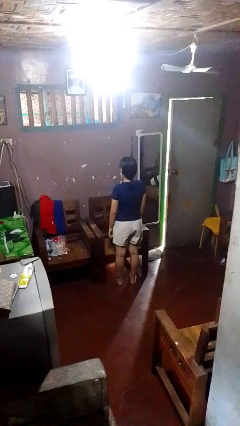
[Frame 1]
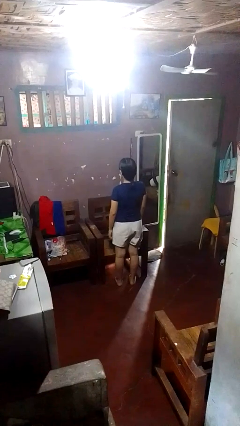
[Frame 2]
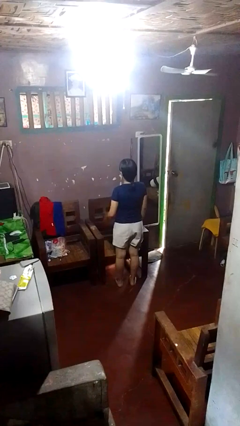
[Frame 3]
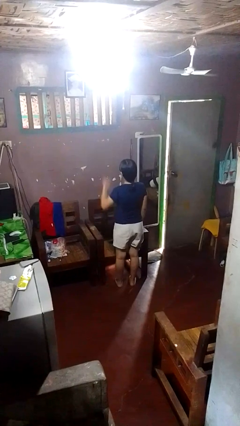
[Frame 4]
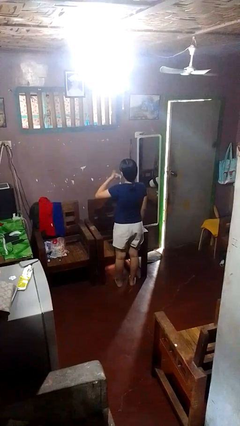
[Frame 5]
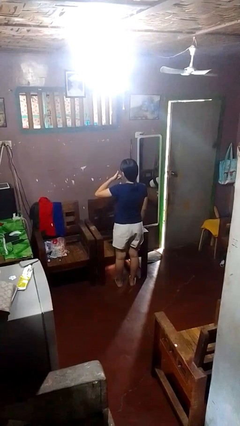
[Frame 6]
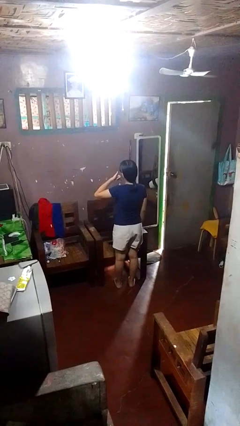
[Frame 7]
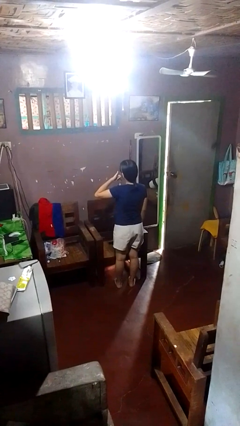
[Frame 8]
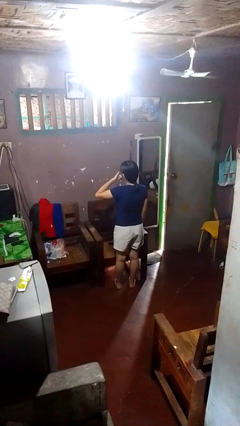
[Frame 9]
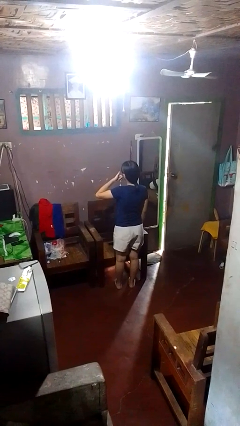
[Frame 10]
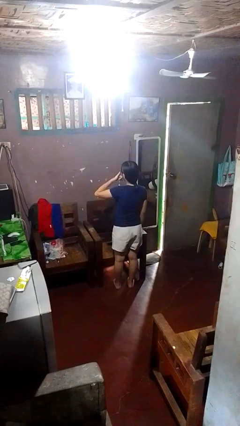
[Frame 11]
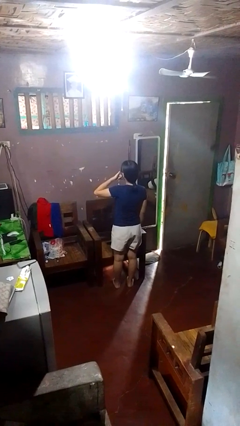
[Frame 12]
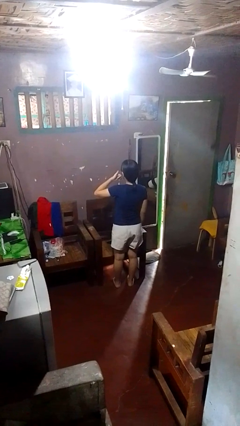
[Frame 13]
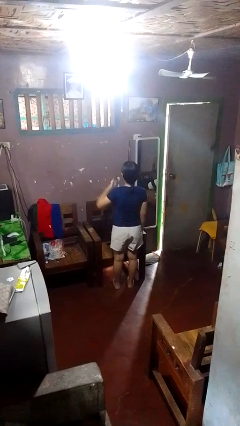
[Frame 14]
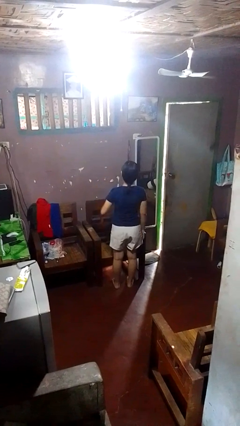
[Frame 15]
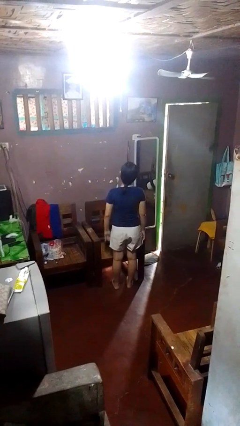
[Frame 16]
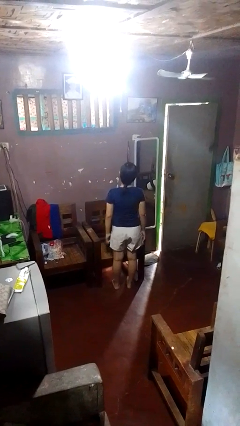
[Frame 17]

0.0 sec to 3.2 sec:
person gestures call me

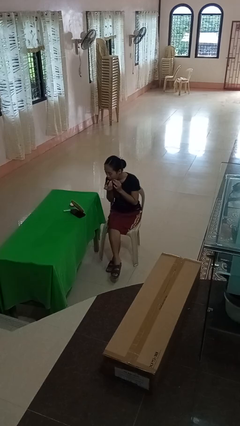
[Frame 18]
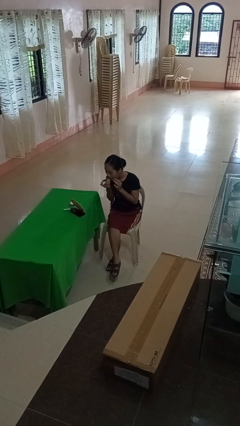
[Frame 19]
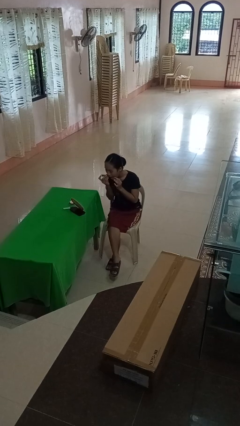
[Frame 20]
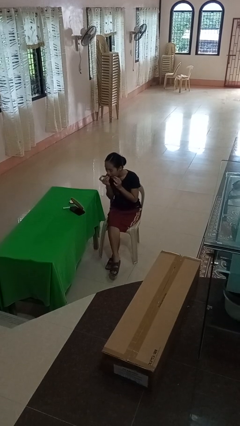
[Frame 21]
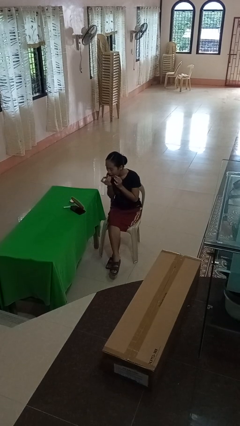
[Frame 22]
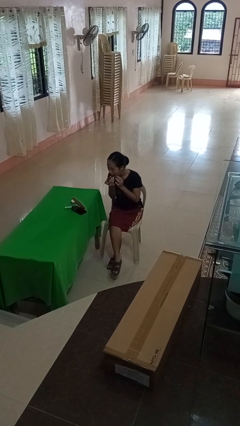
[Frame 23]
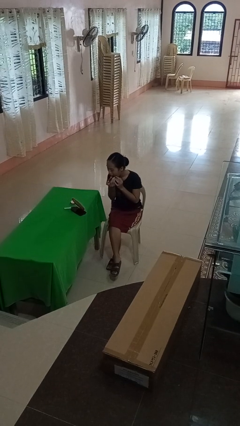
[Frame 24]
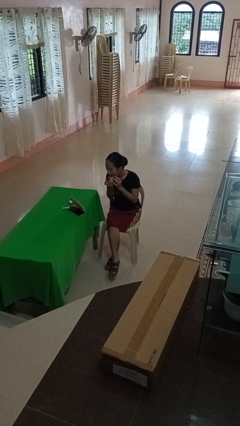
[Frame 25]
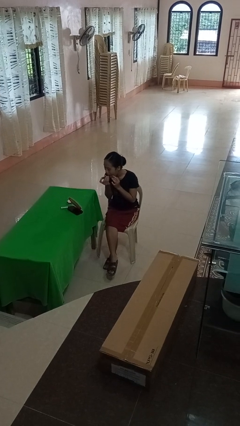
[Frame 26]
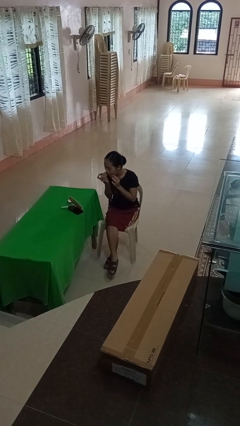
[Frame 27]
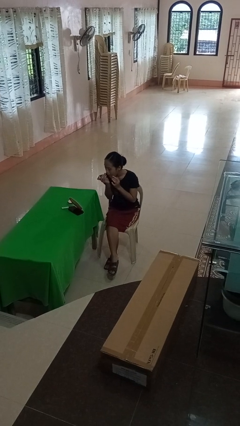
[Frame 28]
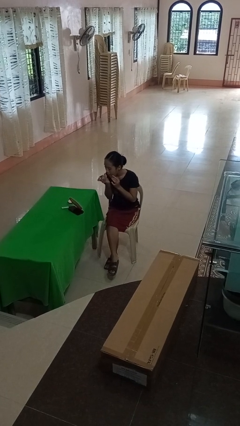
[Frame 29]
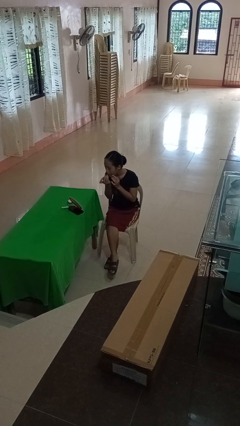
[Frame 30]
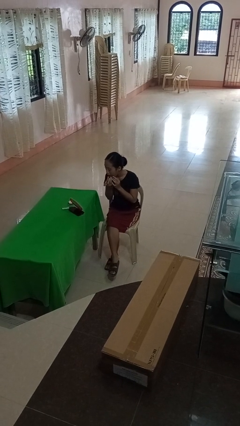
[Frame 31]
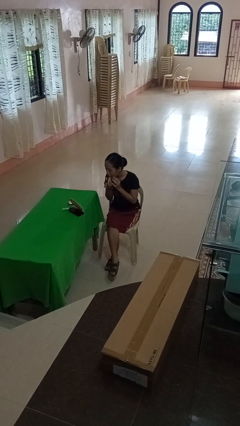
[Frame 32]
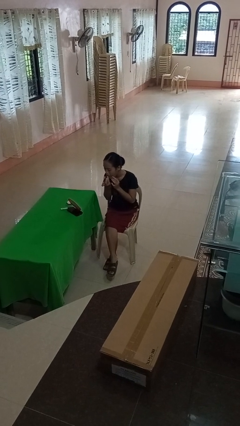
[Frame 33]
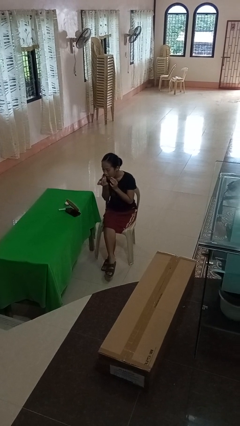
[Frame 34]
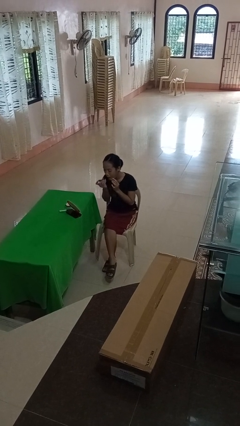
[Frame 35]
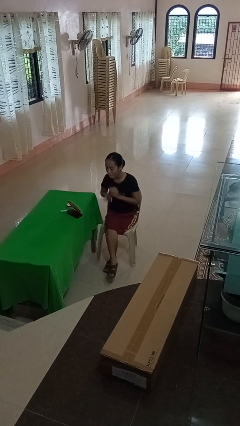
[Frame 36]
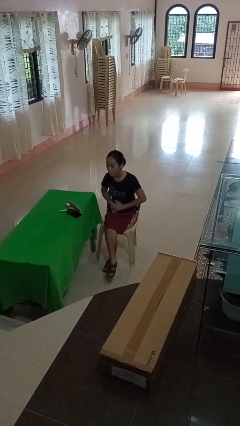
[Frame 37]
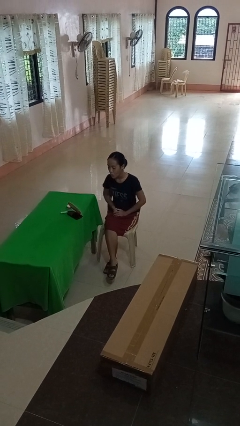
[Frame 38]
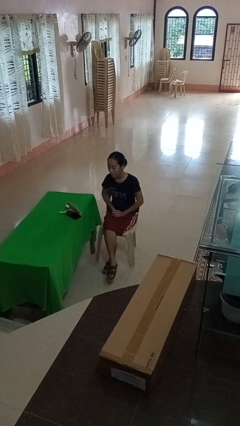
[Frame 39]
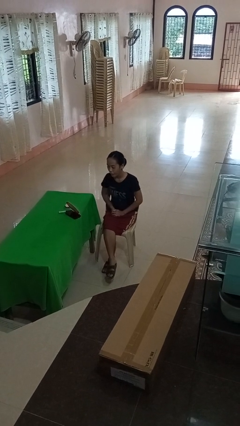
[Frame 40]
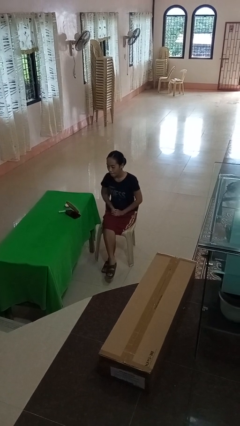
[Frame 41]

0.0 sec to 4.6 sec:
person applies lip makeup

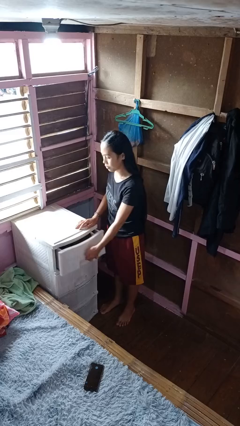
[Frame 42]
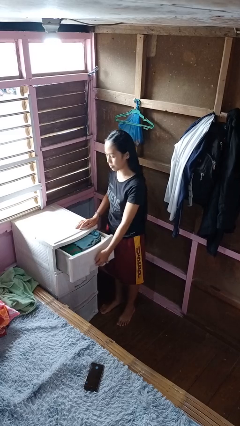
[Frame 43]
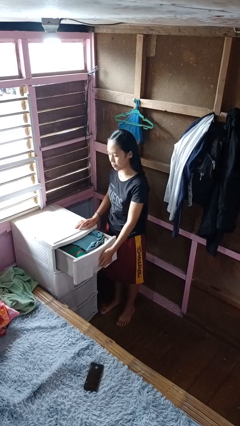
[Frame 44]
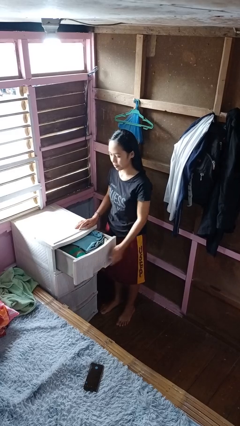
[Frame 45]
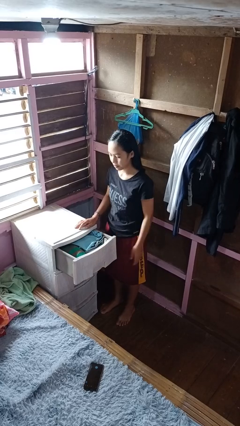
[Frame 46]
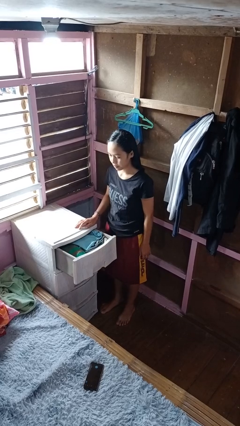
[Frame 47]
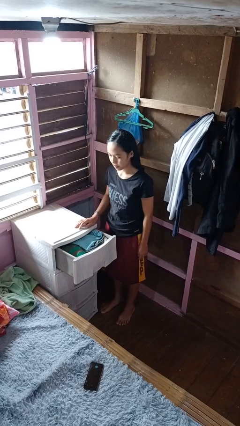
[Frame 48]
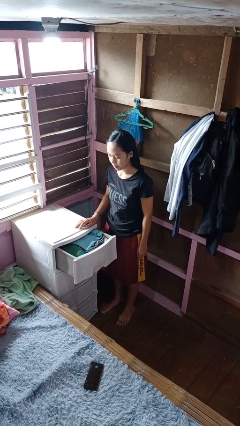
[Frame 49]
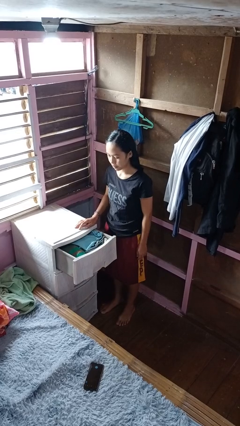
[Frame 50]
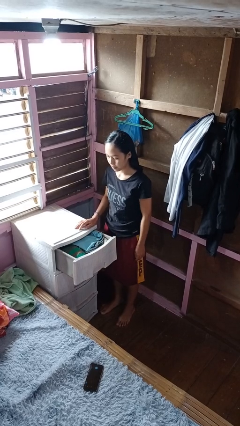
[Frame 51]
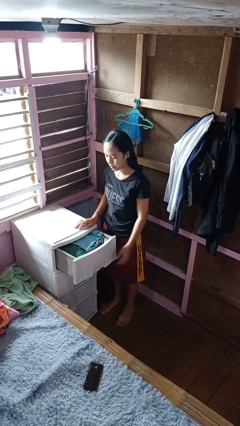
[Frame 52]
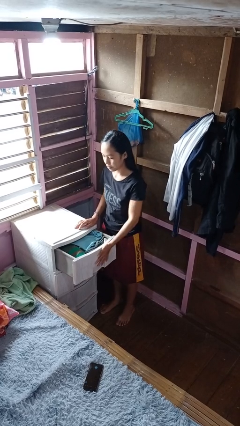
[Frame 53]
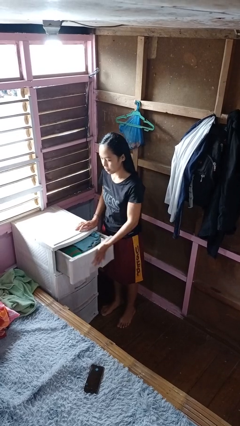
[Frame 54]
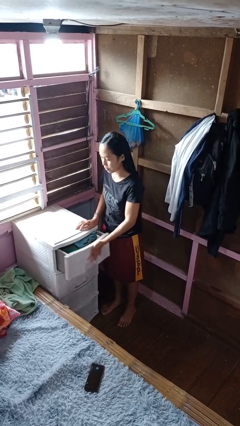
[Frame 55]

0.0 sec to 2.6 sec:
person opens dresser drawer

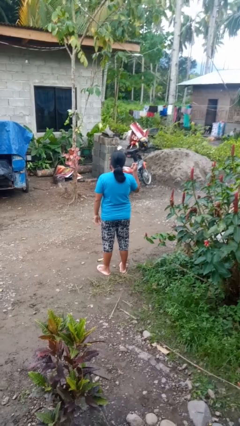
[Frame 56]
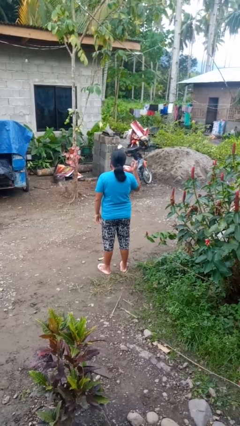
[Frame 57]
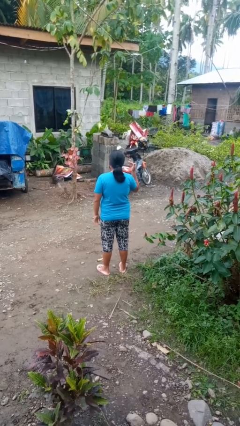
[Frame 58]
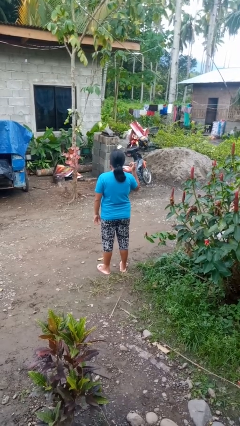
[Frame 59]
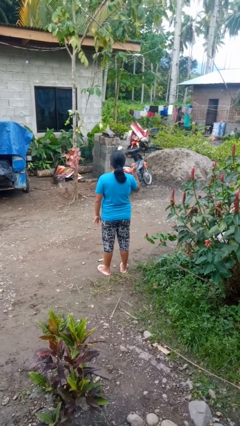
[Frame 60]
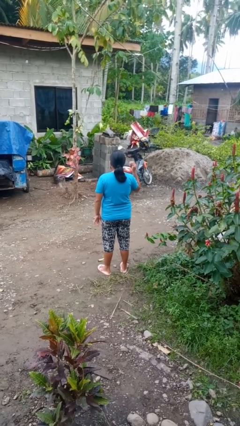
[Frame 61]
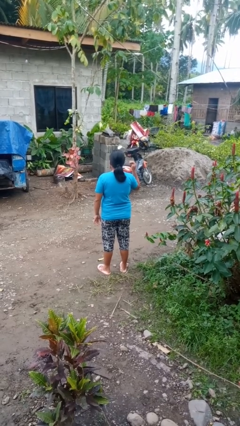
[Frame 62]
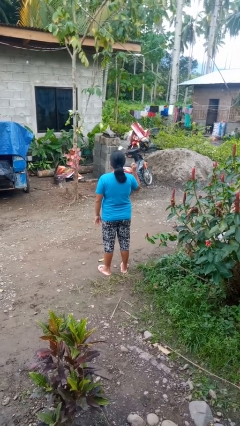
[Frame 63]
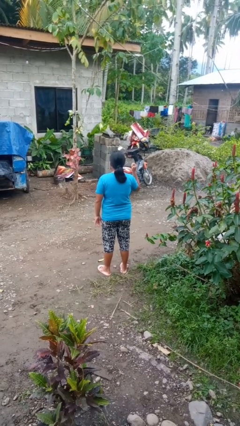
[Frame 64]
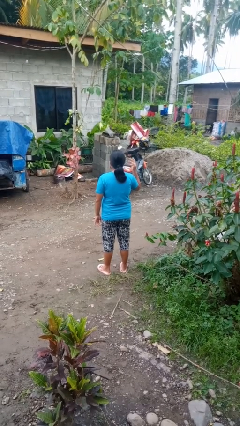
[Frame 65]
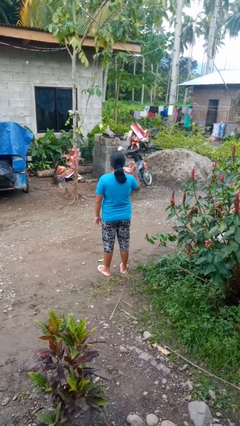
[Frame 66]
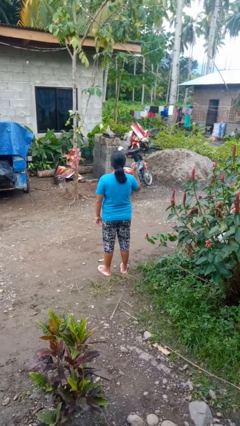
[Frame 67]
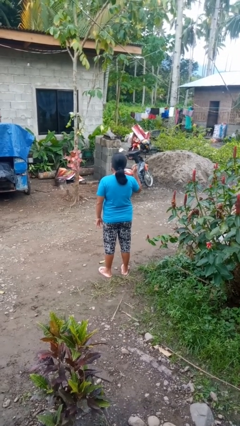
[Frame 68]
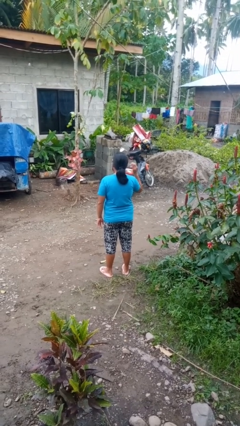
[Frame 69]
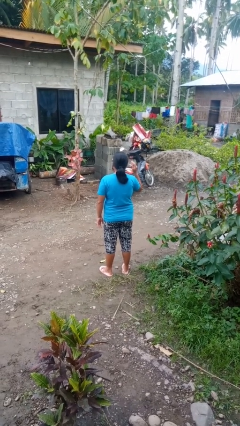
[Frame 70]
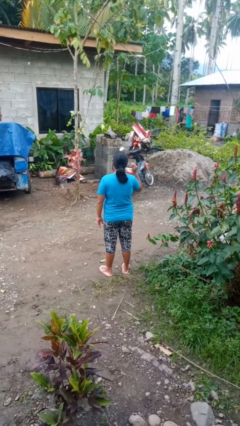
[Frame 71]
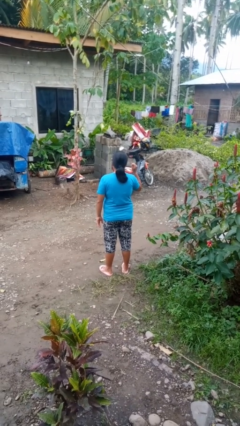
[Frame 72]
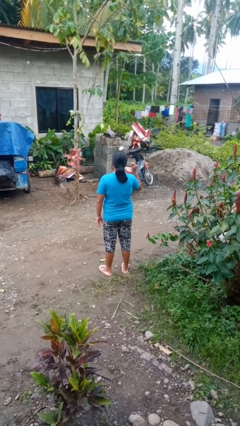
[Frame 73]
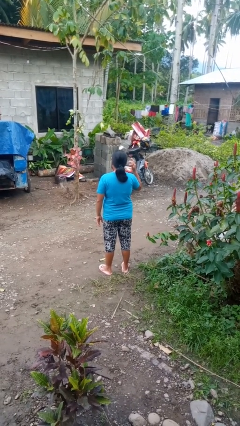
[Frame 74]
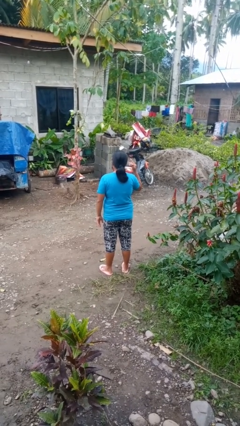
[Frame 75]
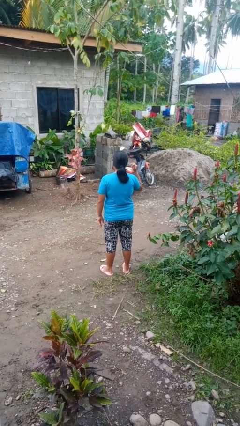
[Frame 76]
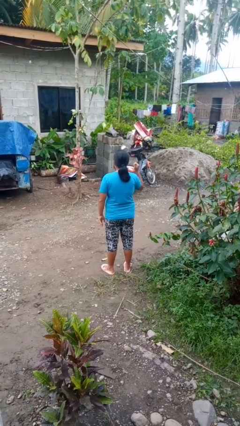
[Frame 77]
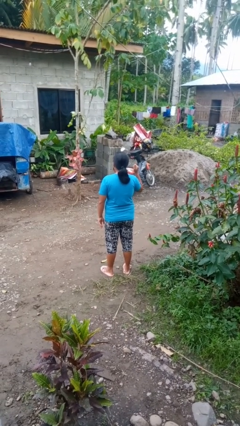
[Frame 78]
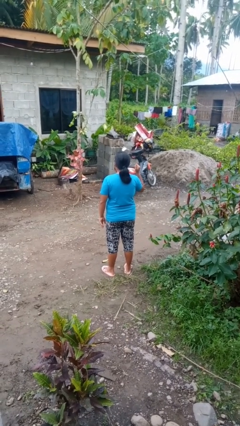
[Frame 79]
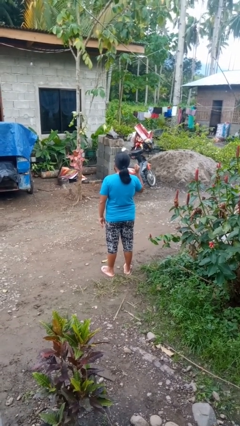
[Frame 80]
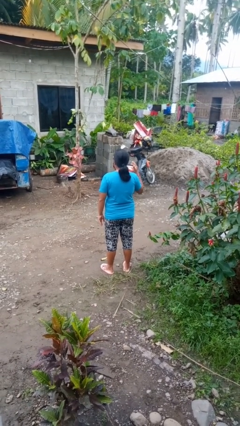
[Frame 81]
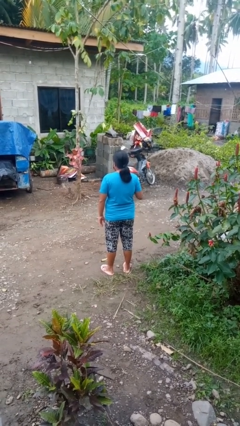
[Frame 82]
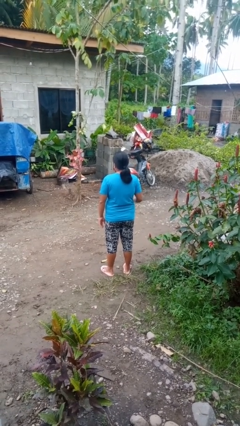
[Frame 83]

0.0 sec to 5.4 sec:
person cracks knuckles

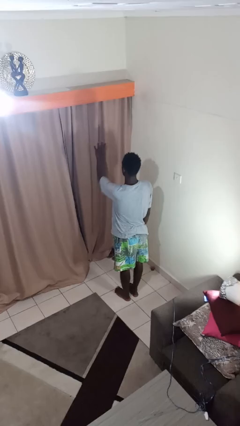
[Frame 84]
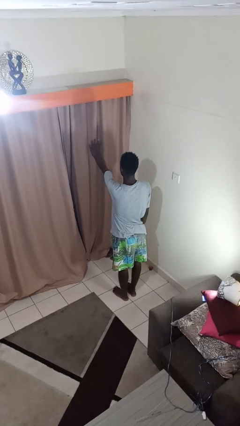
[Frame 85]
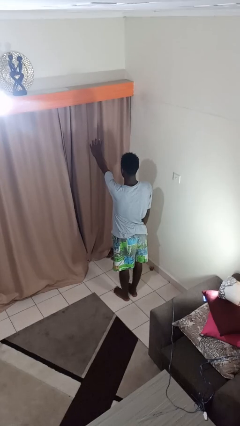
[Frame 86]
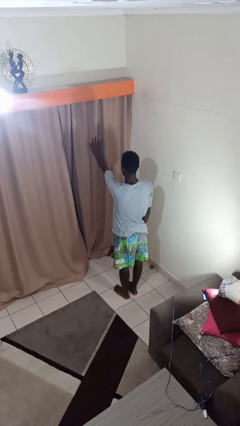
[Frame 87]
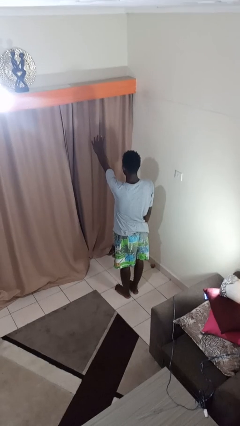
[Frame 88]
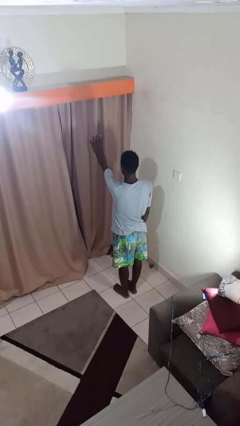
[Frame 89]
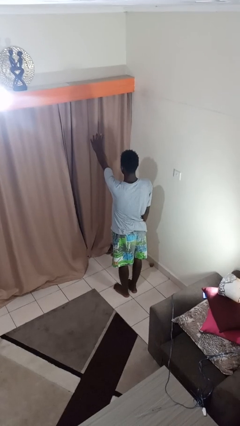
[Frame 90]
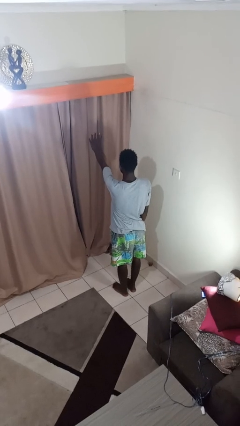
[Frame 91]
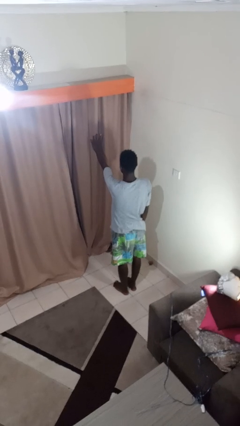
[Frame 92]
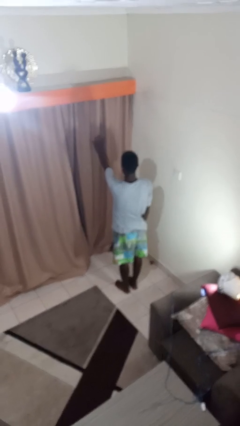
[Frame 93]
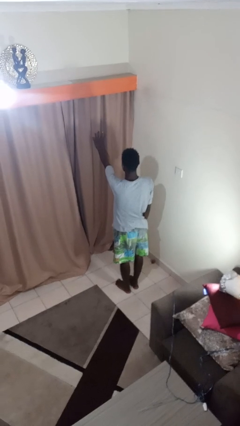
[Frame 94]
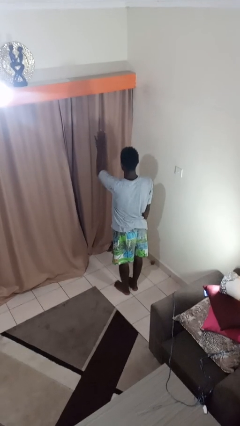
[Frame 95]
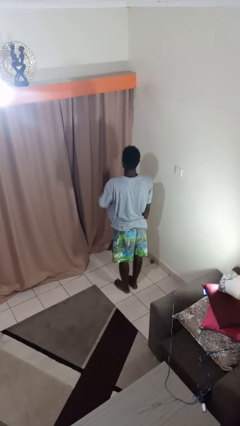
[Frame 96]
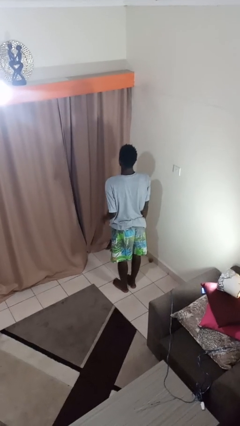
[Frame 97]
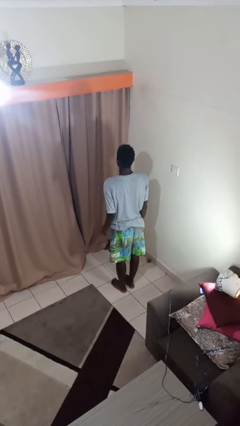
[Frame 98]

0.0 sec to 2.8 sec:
person gestures number four
